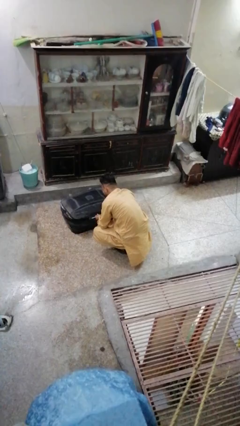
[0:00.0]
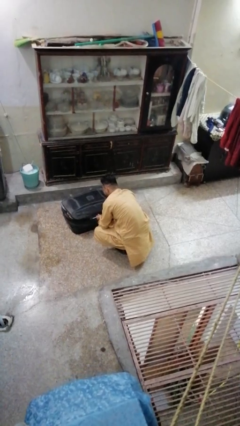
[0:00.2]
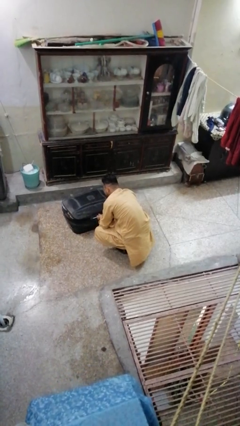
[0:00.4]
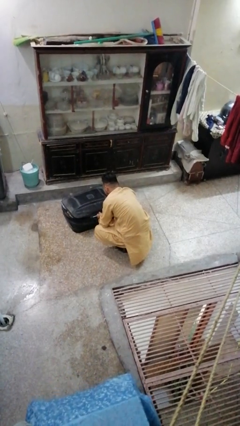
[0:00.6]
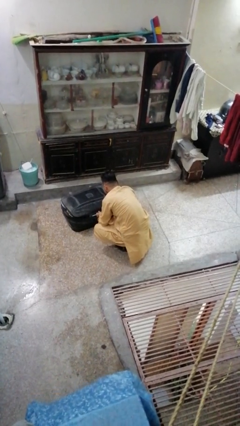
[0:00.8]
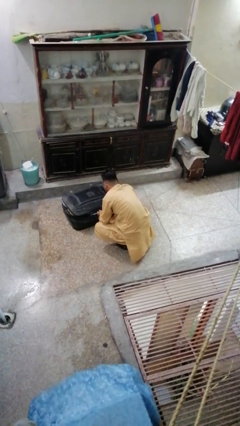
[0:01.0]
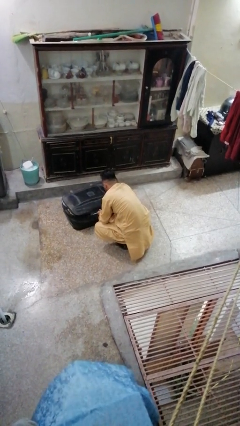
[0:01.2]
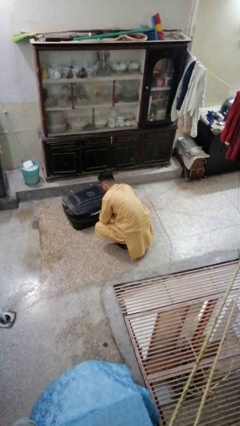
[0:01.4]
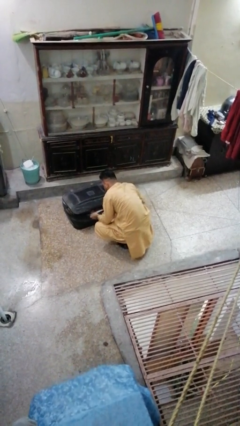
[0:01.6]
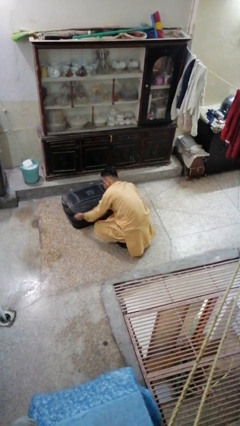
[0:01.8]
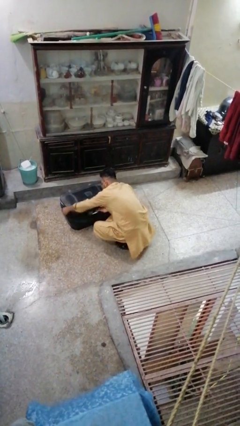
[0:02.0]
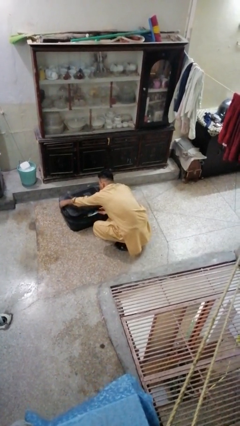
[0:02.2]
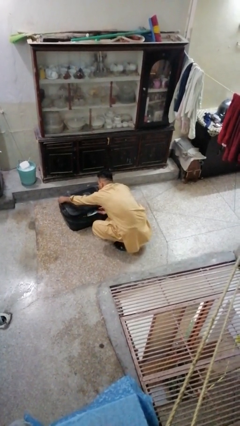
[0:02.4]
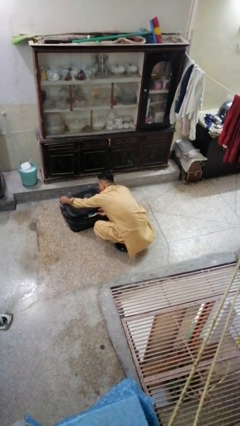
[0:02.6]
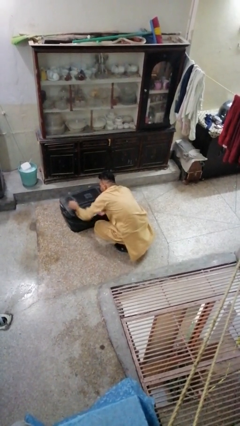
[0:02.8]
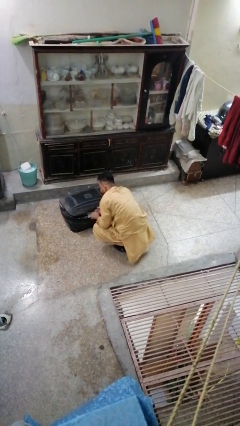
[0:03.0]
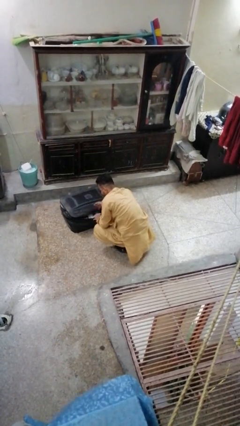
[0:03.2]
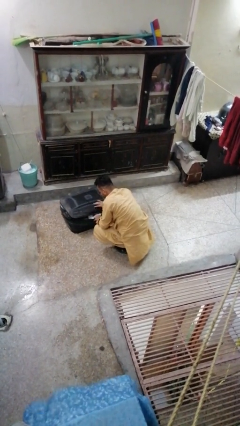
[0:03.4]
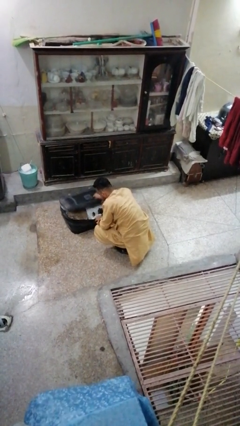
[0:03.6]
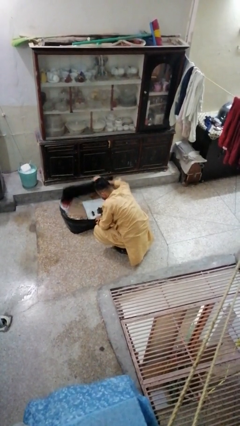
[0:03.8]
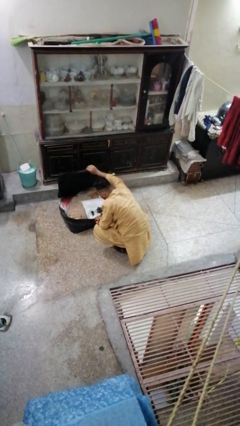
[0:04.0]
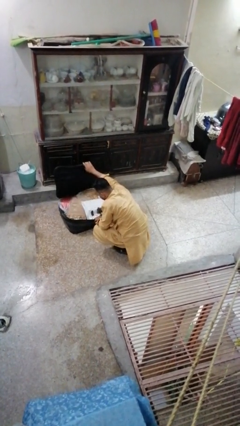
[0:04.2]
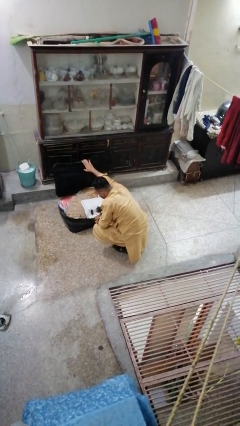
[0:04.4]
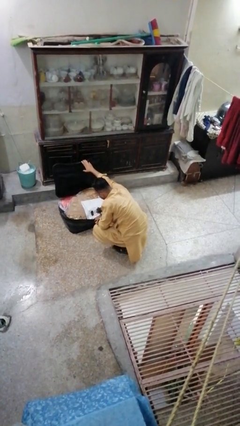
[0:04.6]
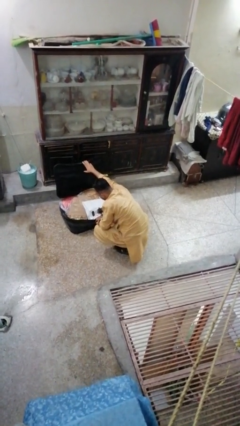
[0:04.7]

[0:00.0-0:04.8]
person opens suitcase

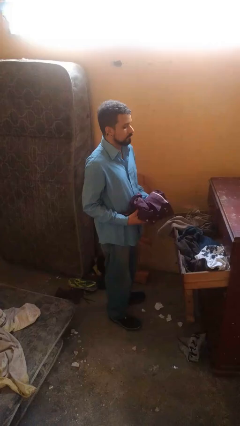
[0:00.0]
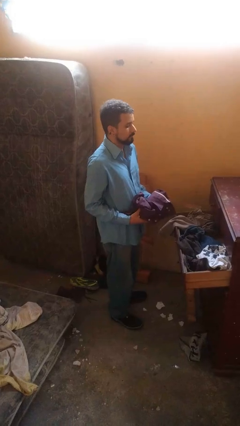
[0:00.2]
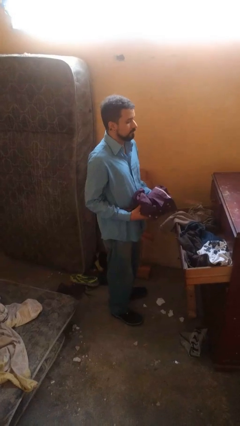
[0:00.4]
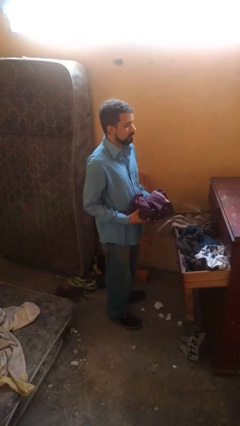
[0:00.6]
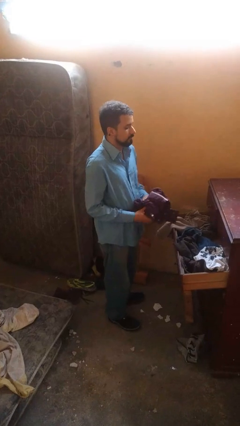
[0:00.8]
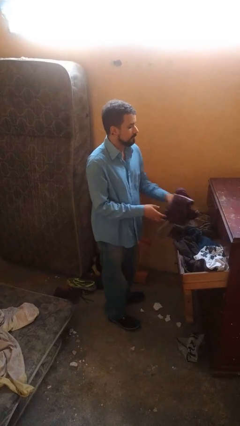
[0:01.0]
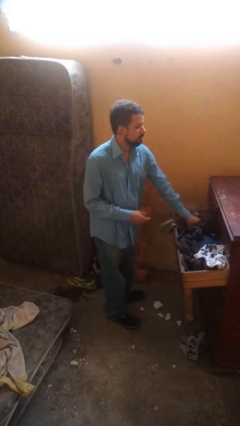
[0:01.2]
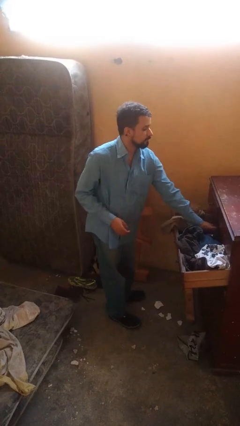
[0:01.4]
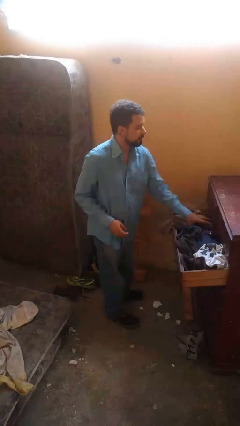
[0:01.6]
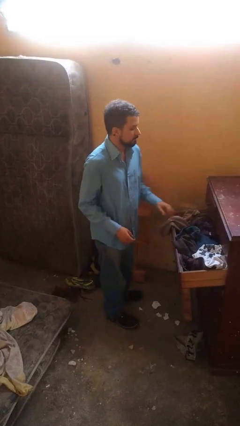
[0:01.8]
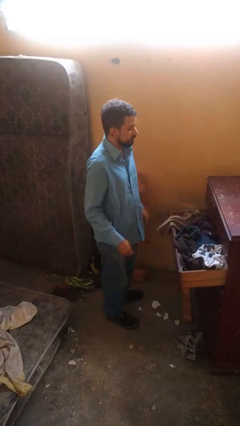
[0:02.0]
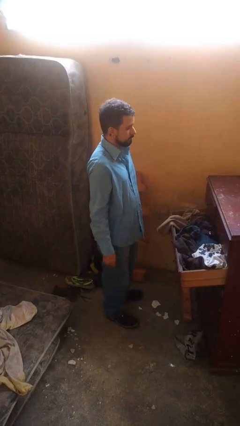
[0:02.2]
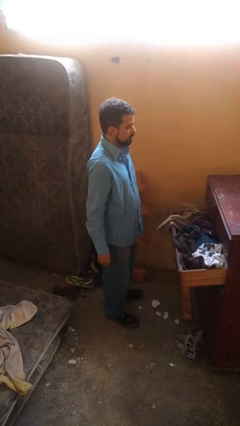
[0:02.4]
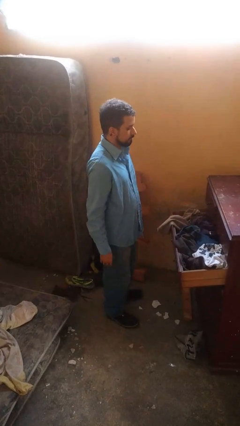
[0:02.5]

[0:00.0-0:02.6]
person puts clothes into dresser

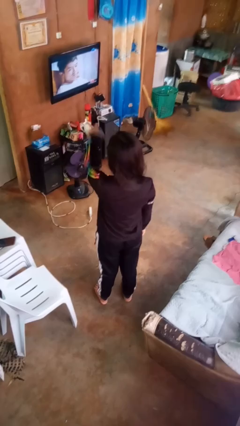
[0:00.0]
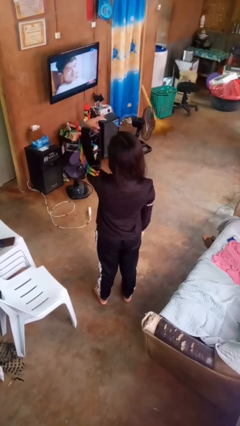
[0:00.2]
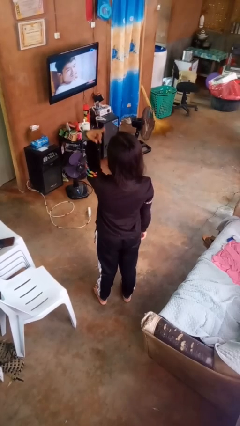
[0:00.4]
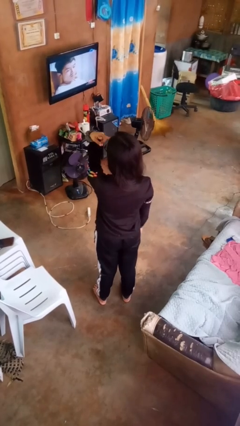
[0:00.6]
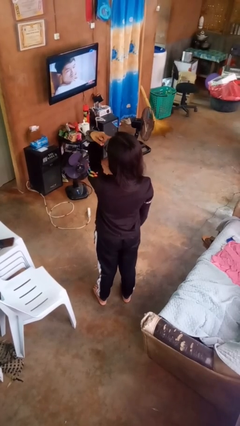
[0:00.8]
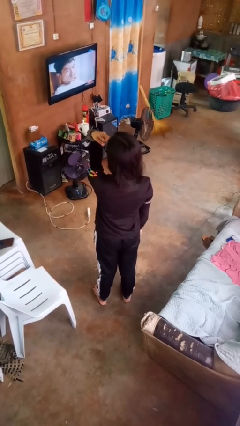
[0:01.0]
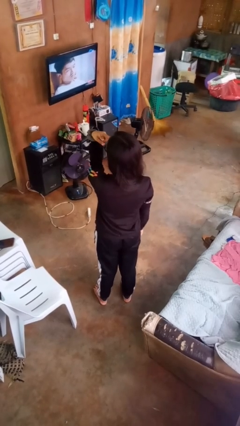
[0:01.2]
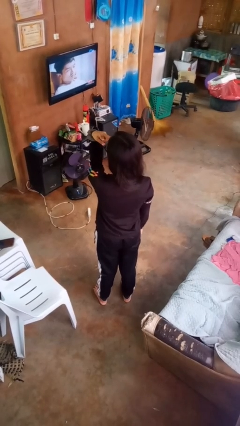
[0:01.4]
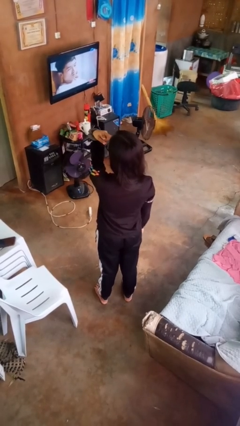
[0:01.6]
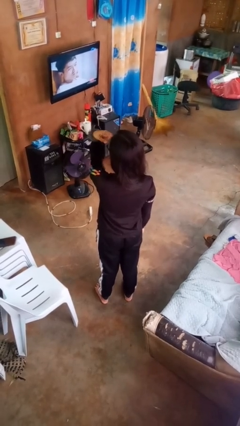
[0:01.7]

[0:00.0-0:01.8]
person gestures watch closely

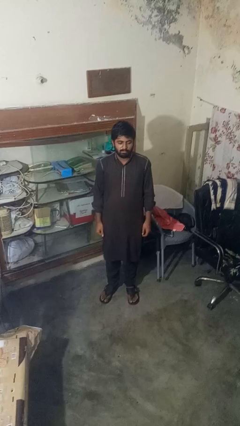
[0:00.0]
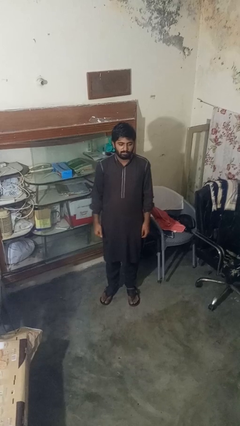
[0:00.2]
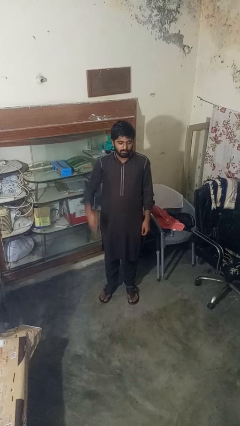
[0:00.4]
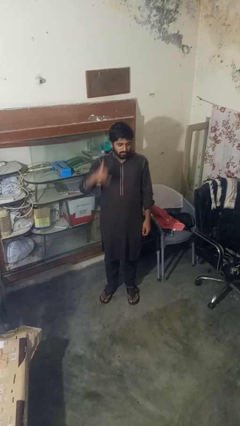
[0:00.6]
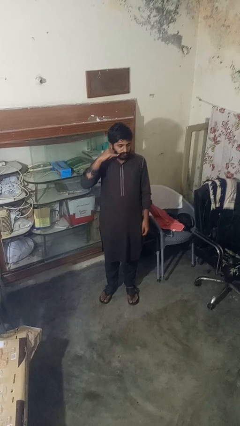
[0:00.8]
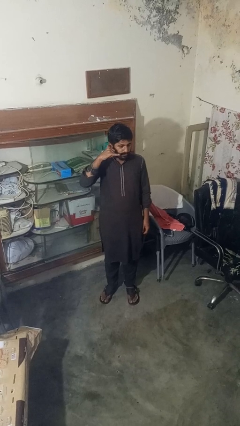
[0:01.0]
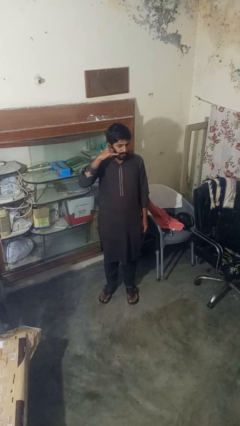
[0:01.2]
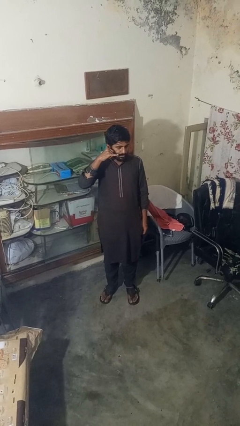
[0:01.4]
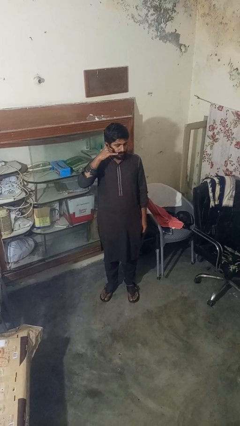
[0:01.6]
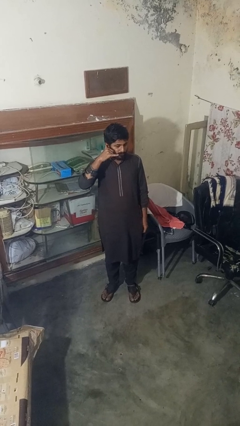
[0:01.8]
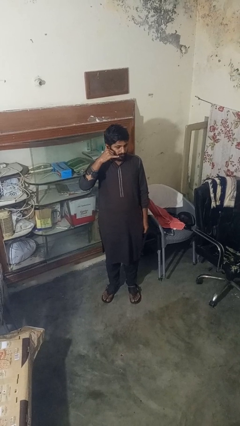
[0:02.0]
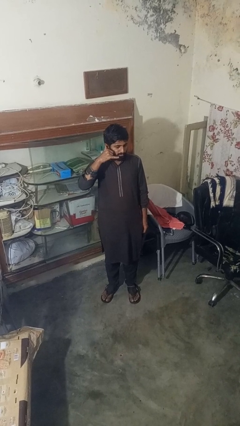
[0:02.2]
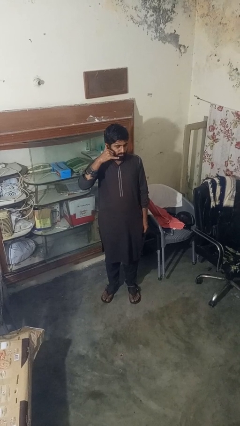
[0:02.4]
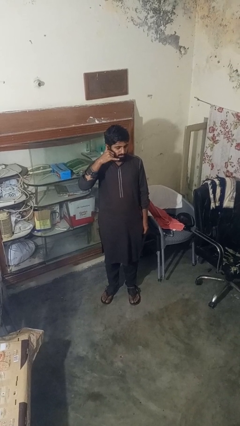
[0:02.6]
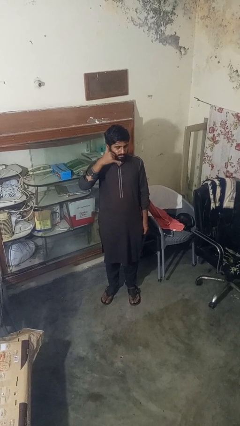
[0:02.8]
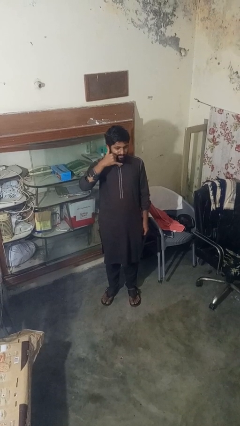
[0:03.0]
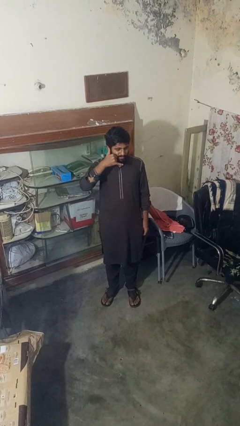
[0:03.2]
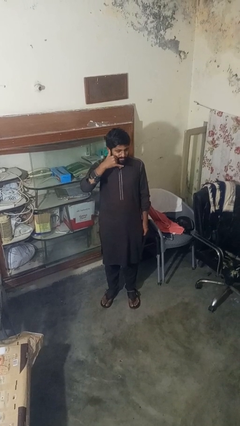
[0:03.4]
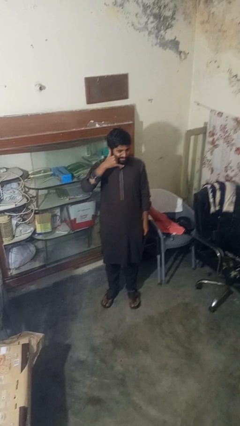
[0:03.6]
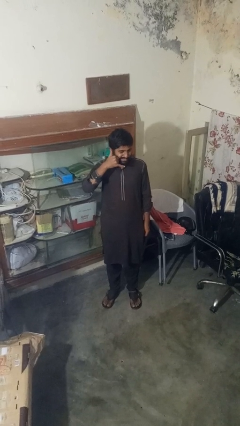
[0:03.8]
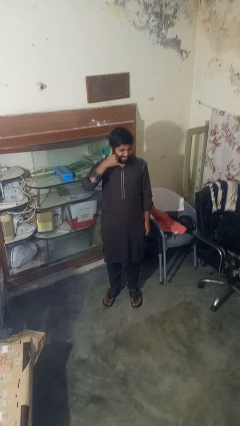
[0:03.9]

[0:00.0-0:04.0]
person gestures call me

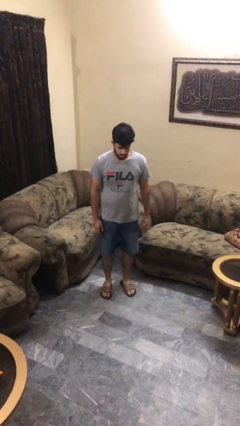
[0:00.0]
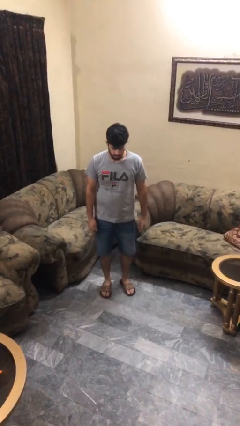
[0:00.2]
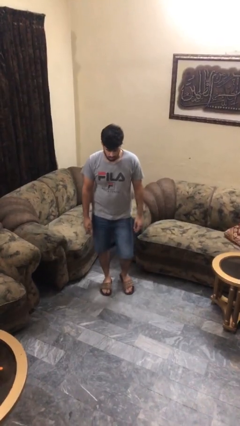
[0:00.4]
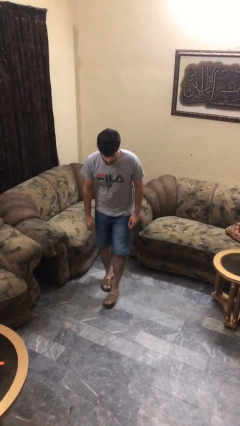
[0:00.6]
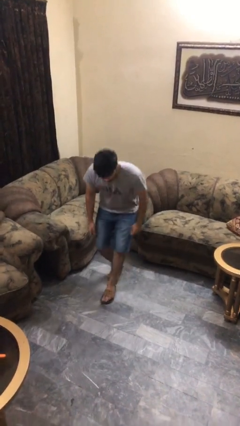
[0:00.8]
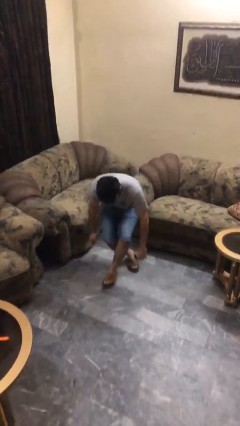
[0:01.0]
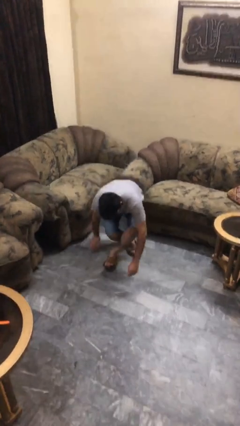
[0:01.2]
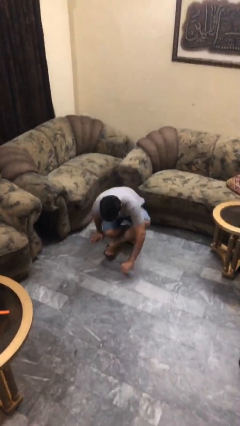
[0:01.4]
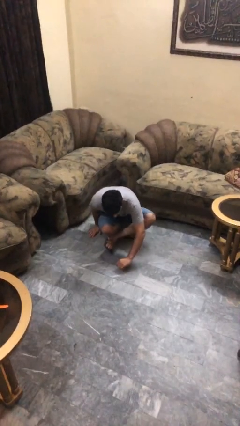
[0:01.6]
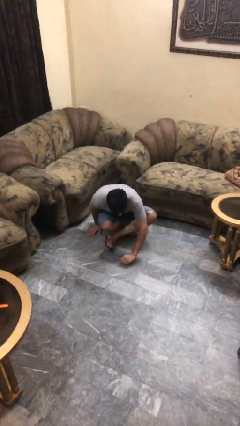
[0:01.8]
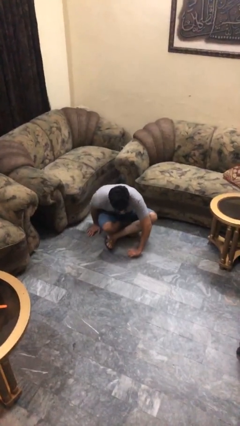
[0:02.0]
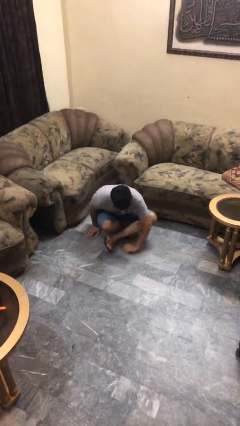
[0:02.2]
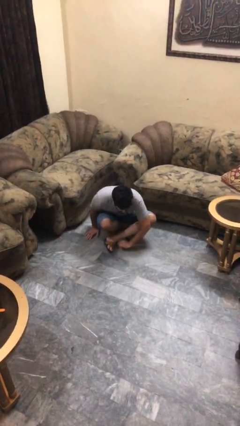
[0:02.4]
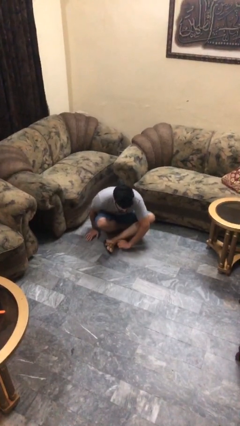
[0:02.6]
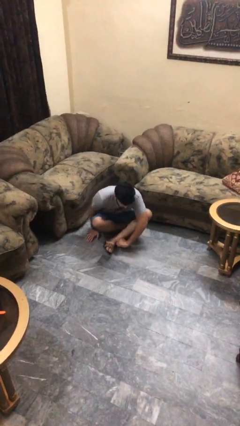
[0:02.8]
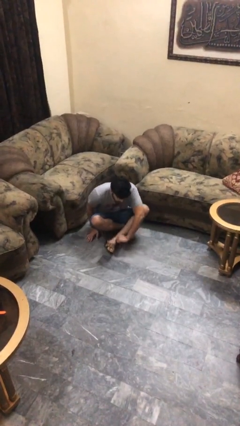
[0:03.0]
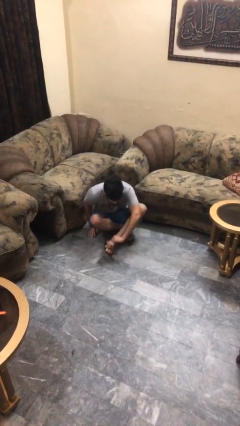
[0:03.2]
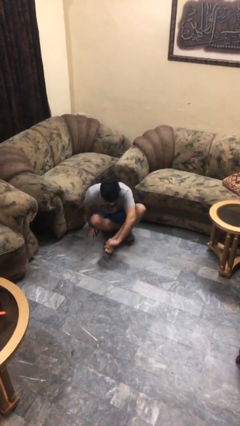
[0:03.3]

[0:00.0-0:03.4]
person sits crisscross

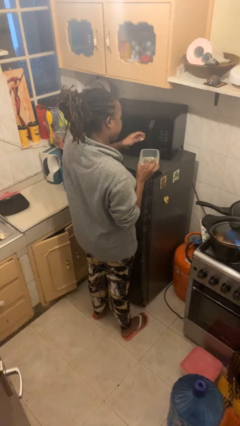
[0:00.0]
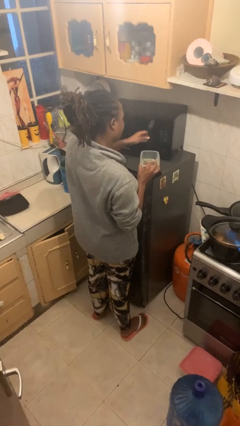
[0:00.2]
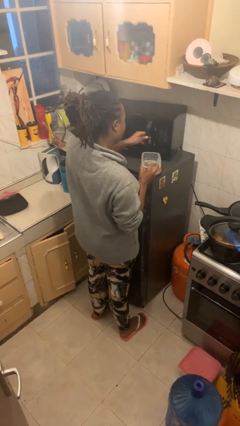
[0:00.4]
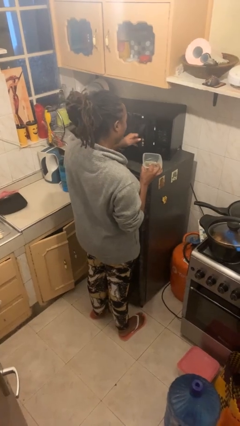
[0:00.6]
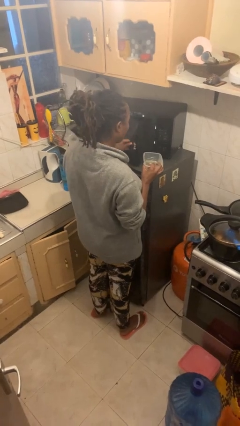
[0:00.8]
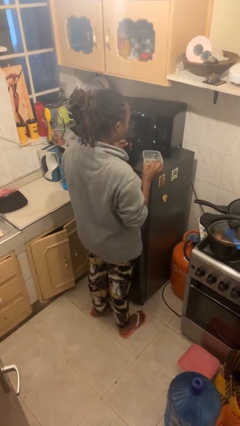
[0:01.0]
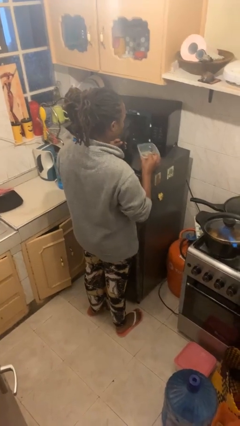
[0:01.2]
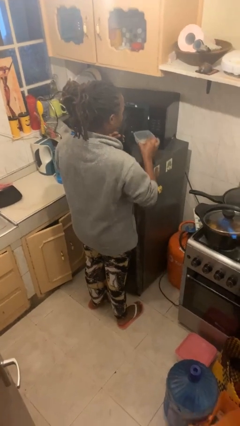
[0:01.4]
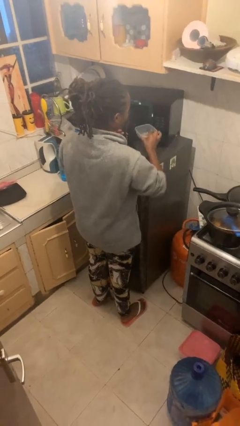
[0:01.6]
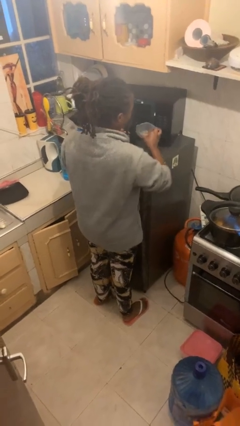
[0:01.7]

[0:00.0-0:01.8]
person opens microwave
